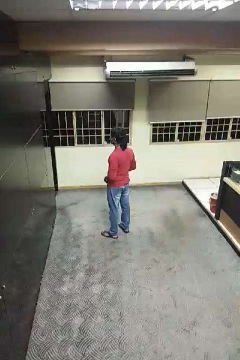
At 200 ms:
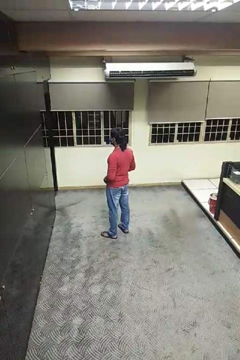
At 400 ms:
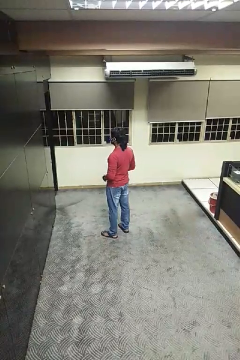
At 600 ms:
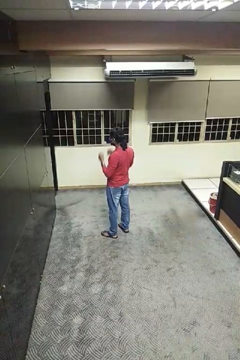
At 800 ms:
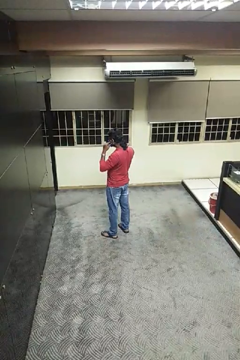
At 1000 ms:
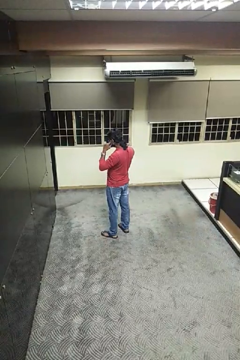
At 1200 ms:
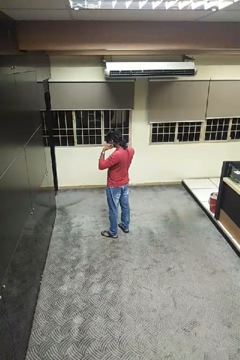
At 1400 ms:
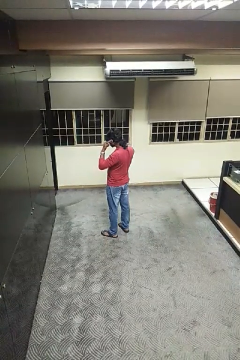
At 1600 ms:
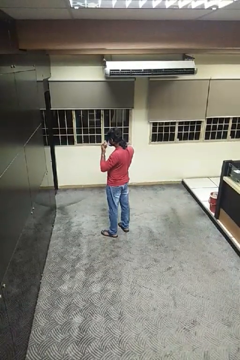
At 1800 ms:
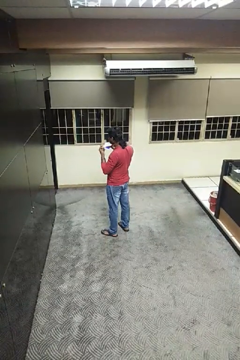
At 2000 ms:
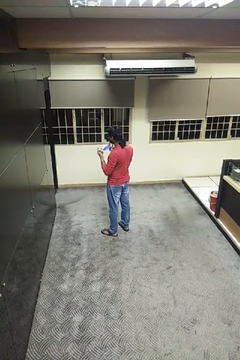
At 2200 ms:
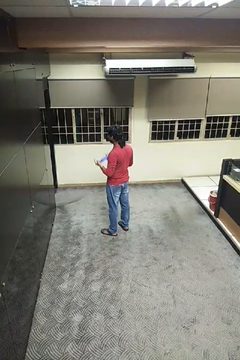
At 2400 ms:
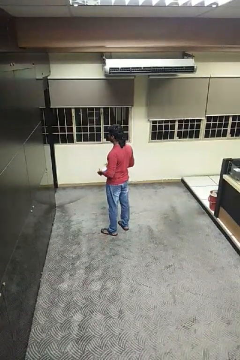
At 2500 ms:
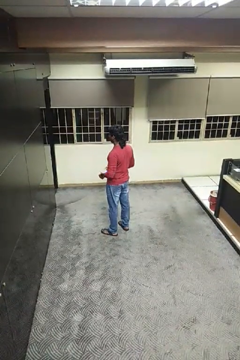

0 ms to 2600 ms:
person takes off facemask

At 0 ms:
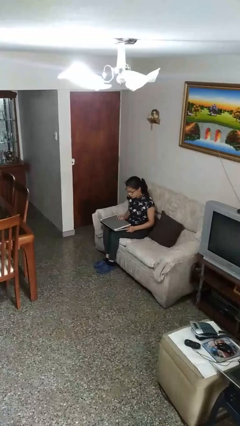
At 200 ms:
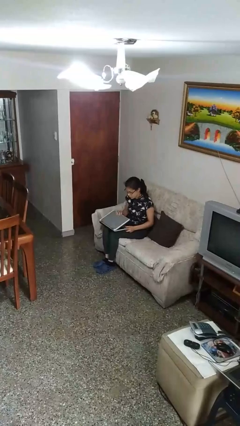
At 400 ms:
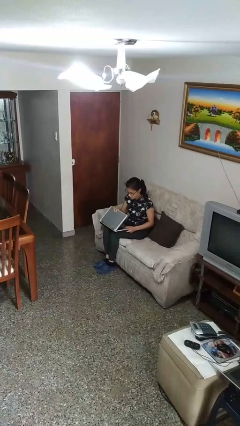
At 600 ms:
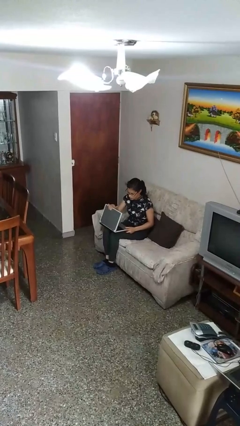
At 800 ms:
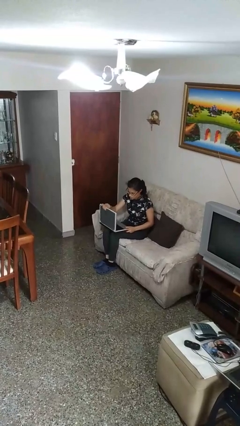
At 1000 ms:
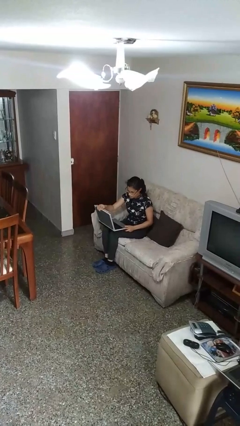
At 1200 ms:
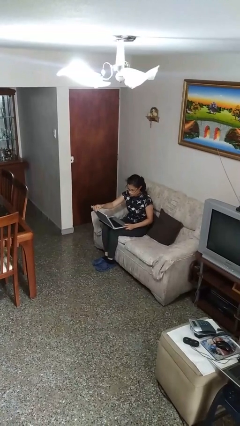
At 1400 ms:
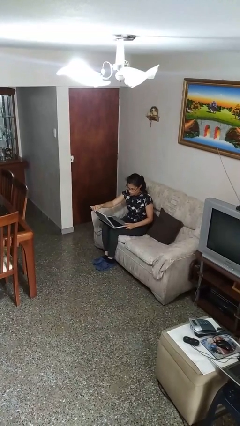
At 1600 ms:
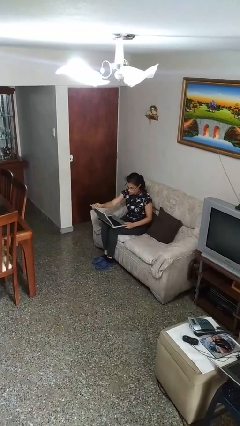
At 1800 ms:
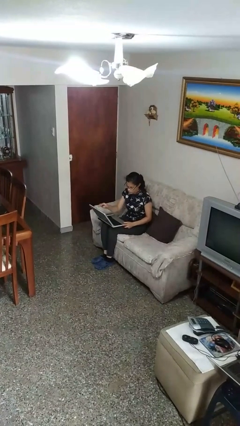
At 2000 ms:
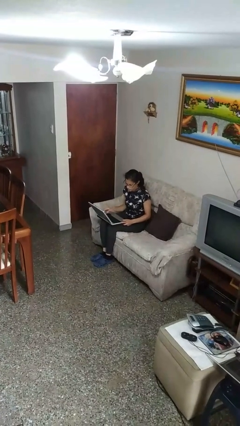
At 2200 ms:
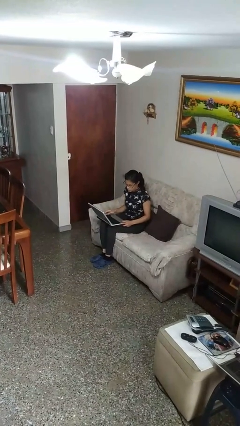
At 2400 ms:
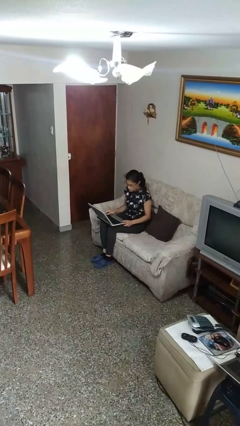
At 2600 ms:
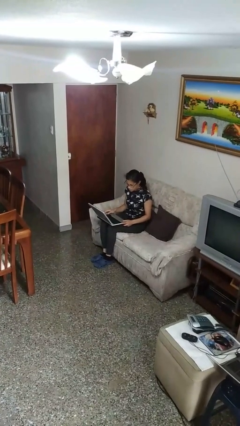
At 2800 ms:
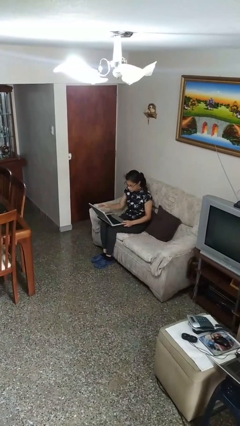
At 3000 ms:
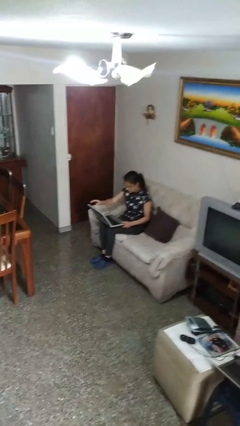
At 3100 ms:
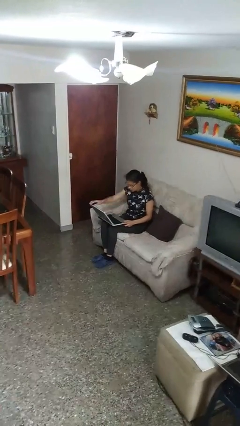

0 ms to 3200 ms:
person opens laptop

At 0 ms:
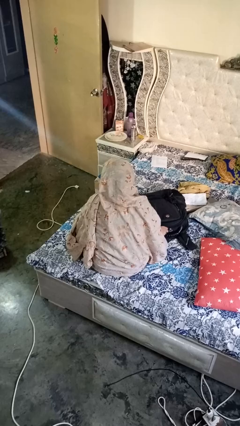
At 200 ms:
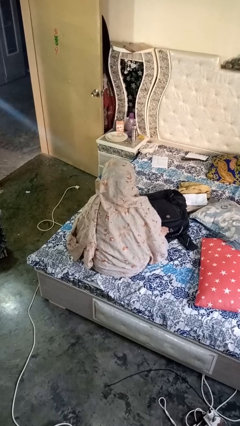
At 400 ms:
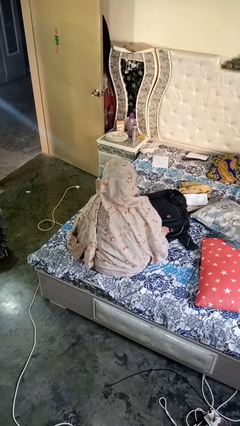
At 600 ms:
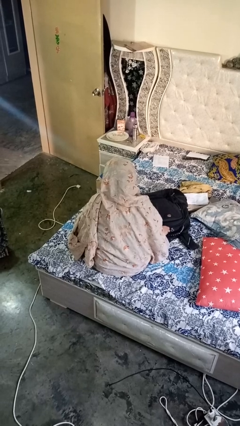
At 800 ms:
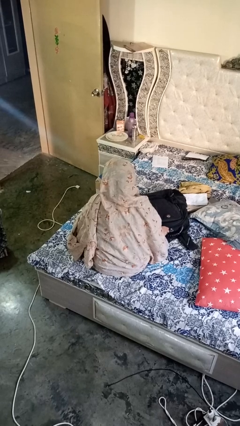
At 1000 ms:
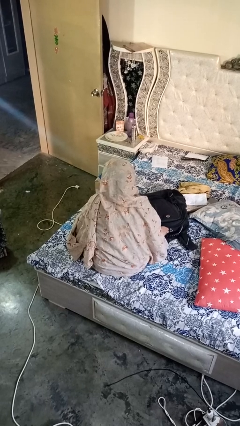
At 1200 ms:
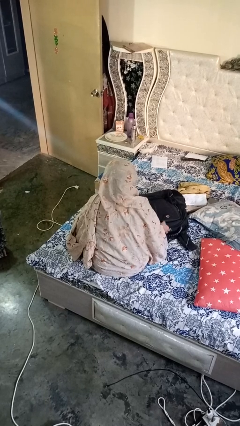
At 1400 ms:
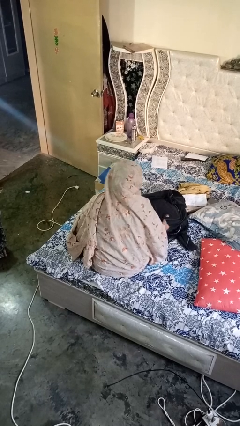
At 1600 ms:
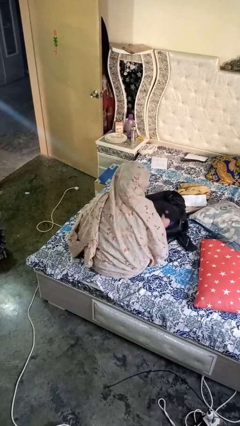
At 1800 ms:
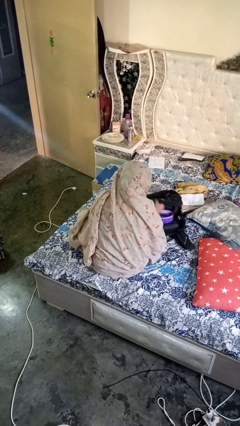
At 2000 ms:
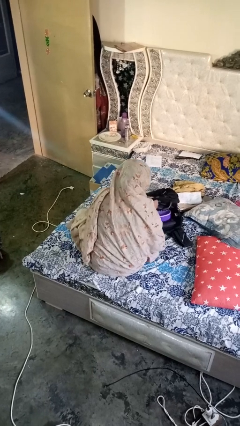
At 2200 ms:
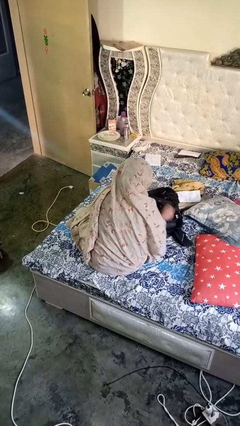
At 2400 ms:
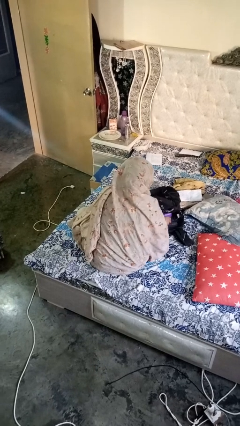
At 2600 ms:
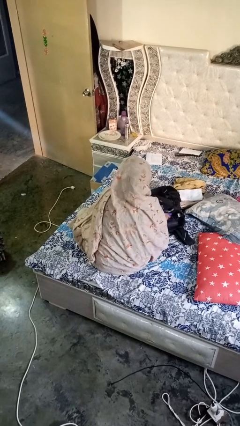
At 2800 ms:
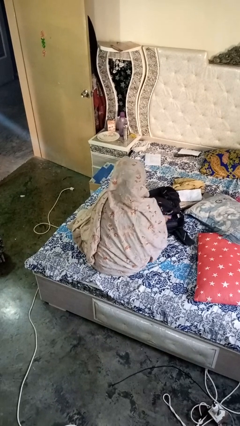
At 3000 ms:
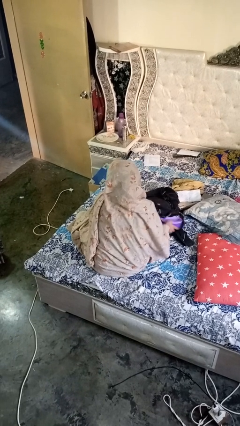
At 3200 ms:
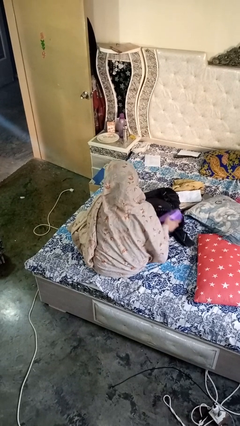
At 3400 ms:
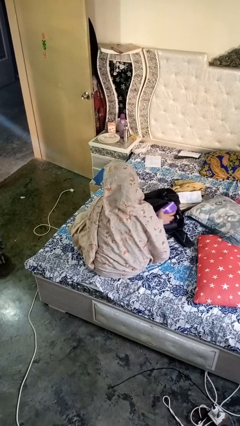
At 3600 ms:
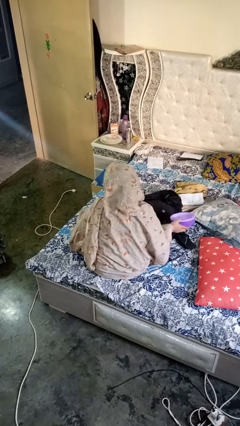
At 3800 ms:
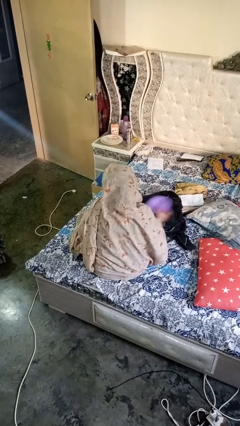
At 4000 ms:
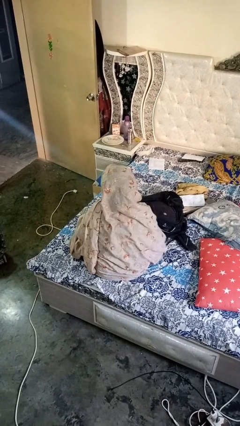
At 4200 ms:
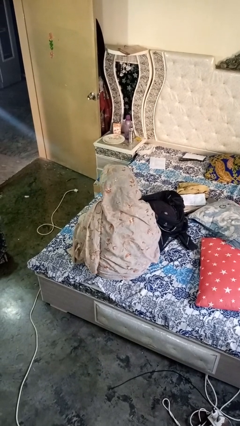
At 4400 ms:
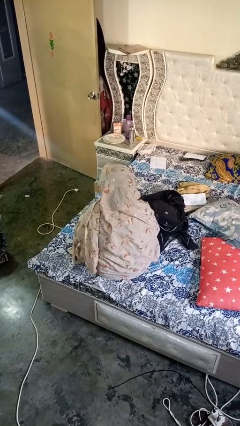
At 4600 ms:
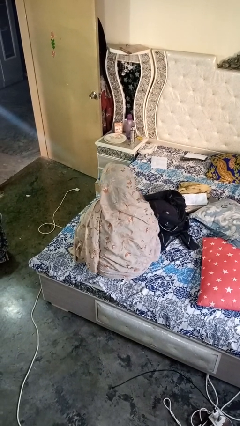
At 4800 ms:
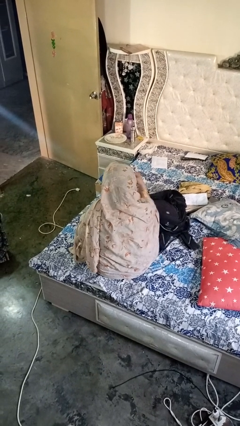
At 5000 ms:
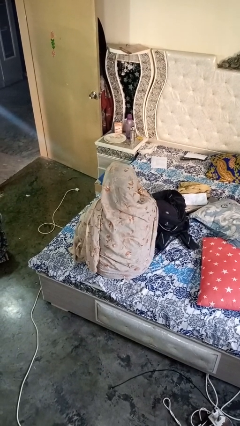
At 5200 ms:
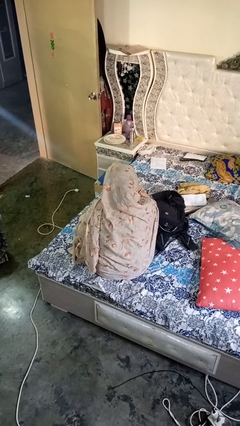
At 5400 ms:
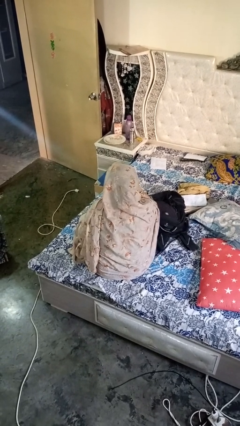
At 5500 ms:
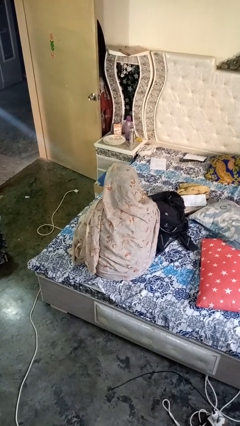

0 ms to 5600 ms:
person eats snack from bag

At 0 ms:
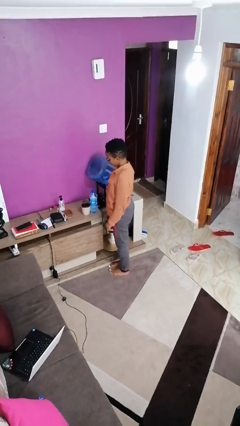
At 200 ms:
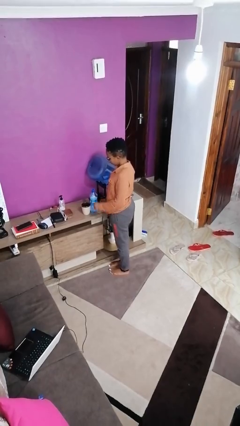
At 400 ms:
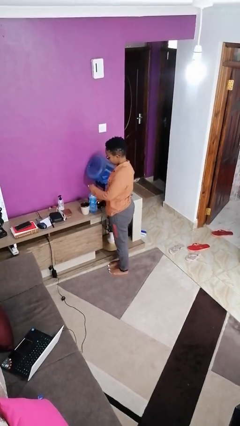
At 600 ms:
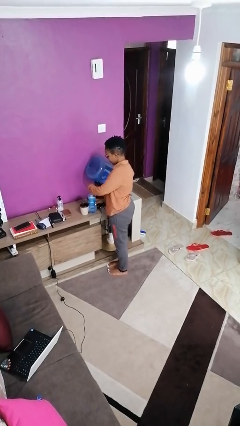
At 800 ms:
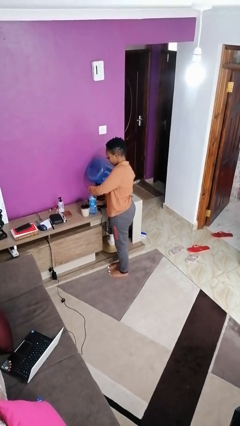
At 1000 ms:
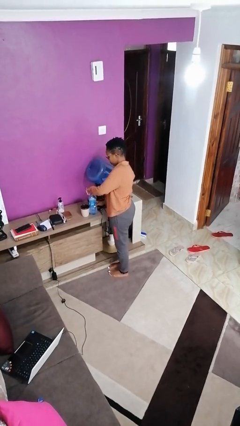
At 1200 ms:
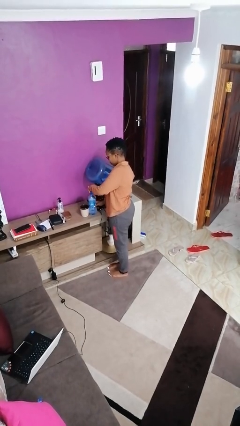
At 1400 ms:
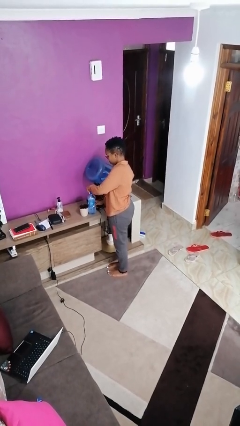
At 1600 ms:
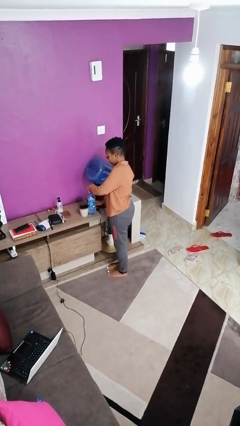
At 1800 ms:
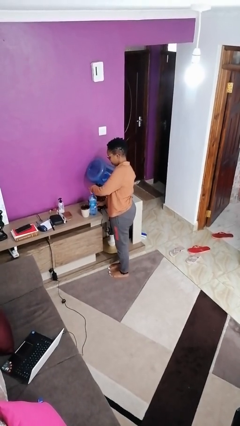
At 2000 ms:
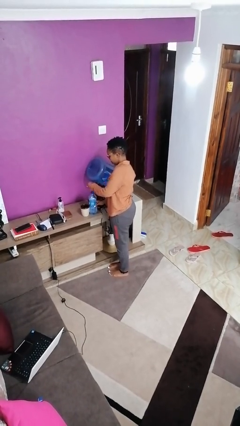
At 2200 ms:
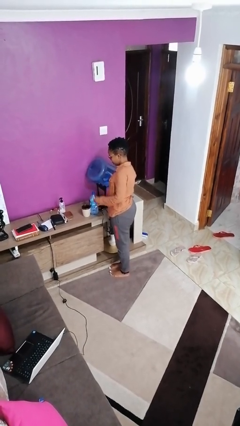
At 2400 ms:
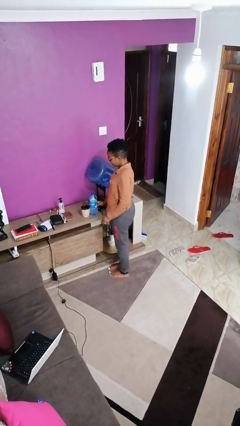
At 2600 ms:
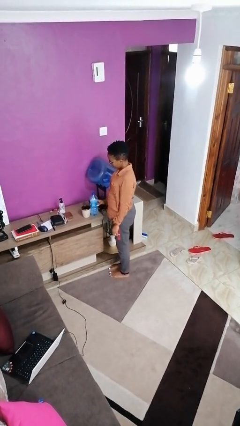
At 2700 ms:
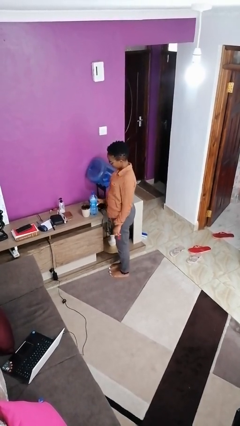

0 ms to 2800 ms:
person unscrews lid from bottle

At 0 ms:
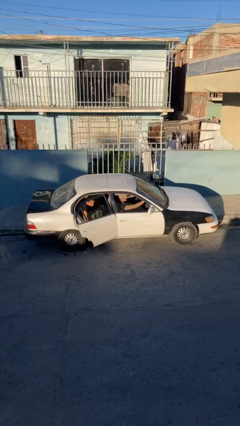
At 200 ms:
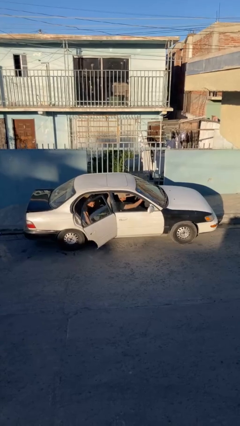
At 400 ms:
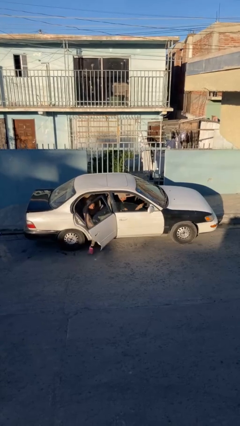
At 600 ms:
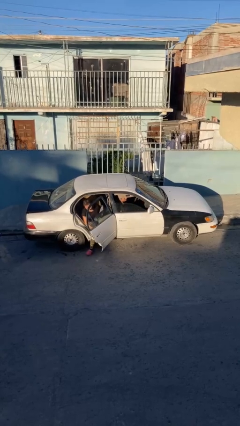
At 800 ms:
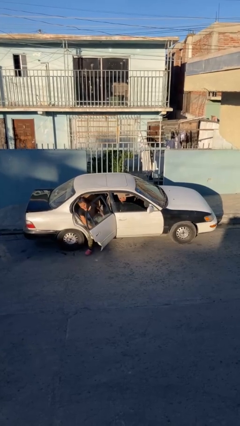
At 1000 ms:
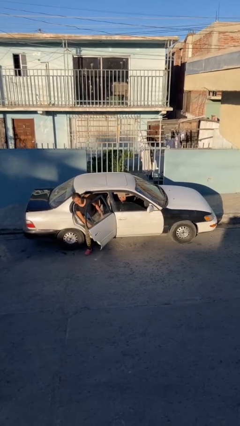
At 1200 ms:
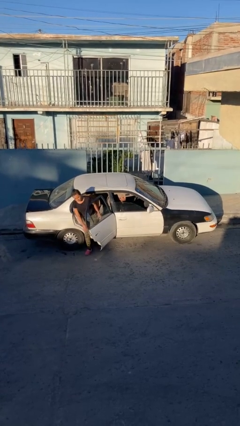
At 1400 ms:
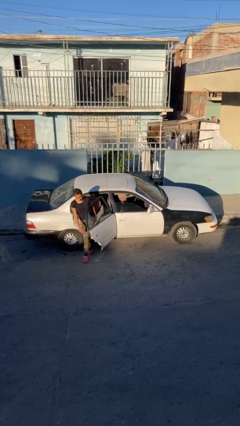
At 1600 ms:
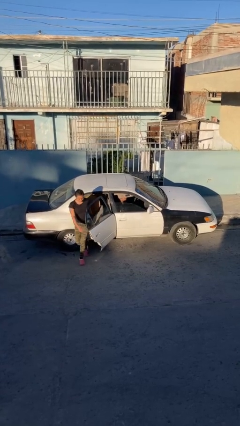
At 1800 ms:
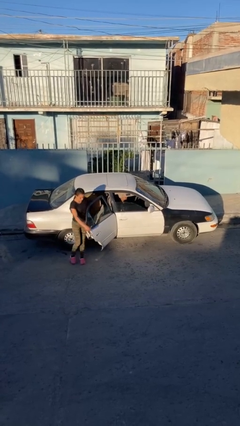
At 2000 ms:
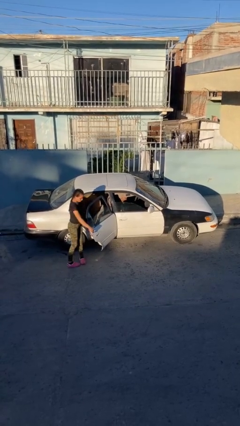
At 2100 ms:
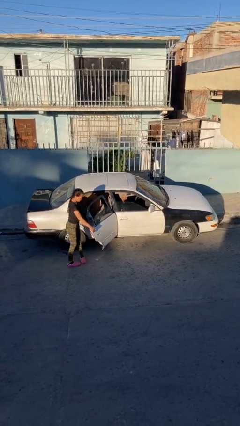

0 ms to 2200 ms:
car drops off person

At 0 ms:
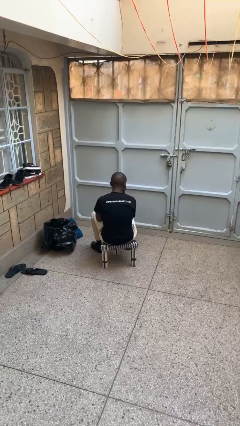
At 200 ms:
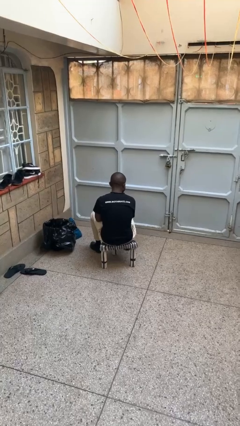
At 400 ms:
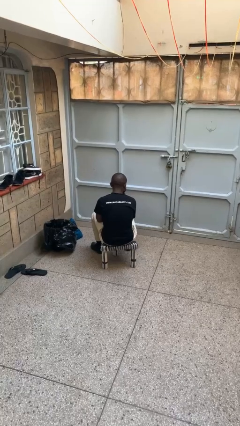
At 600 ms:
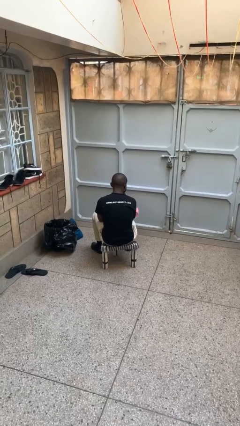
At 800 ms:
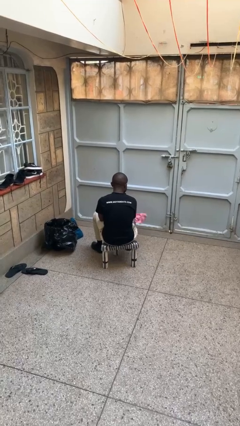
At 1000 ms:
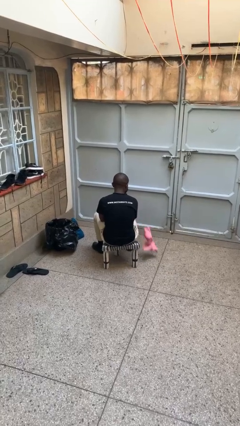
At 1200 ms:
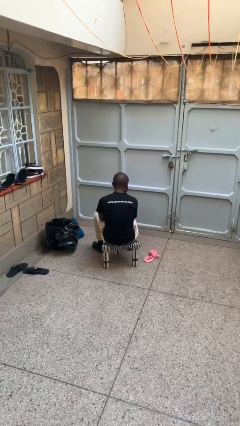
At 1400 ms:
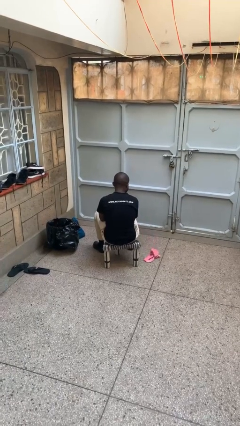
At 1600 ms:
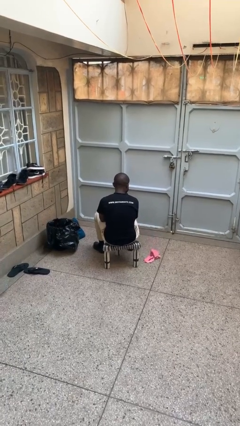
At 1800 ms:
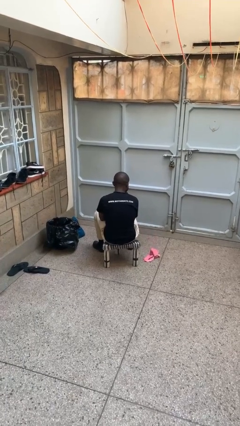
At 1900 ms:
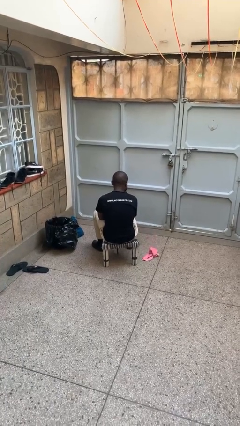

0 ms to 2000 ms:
person throws object on table
